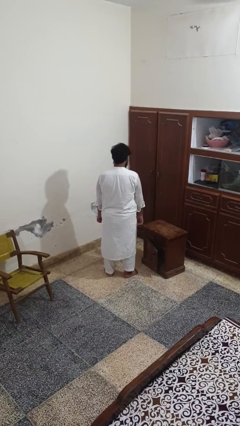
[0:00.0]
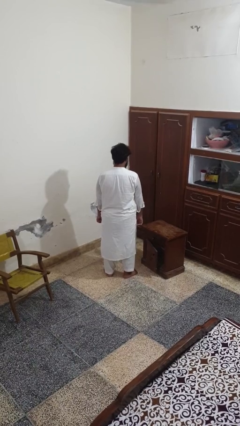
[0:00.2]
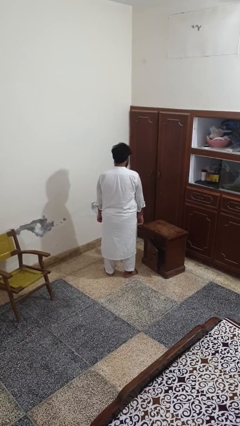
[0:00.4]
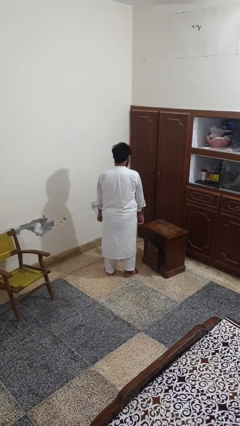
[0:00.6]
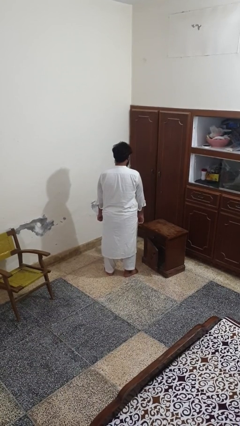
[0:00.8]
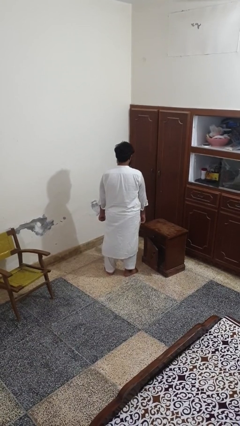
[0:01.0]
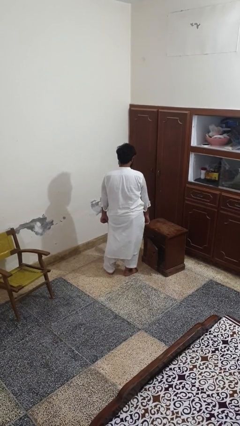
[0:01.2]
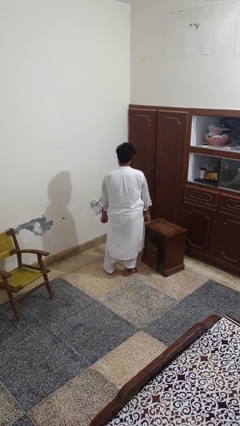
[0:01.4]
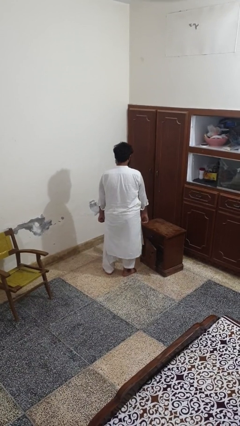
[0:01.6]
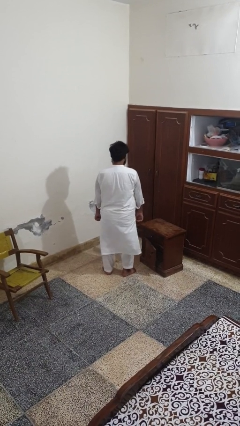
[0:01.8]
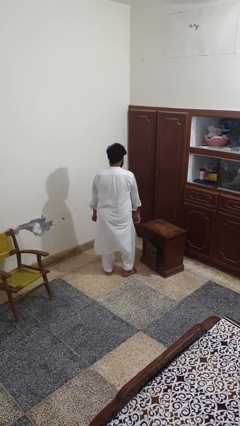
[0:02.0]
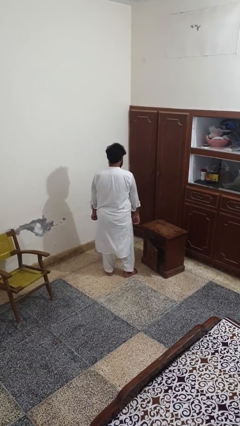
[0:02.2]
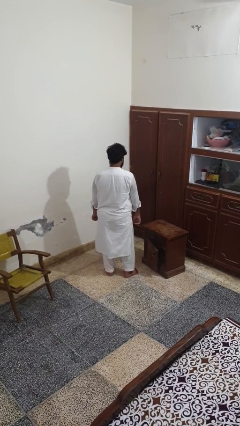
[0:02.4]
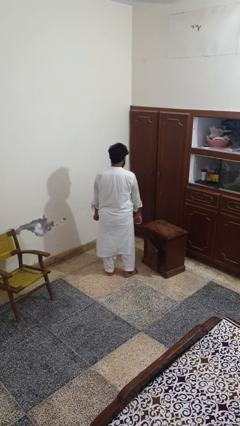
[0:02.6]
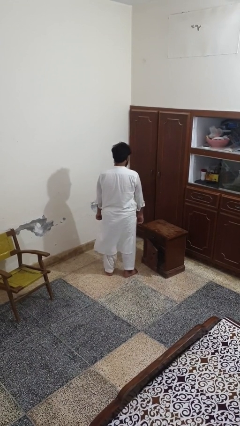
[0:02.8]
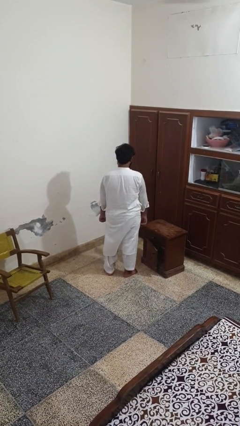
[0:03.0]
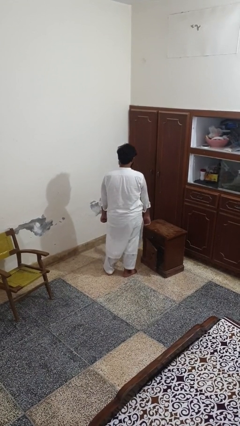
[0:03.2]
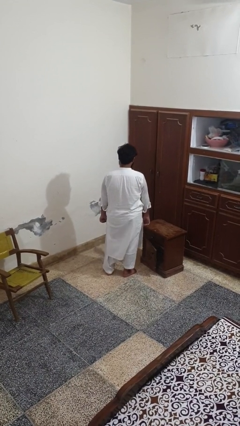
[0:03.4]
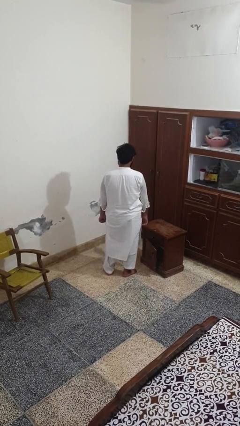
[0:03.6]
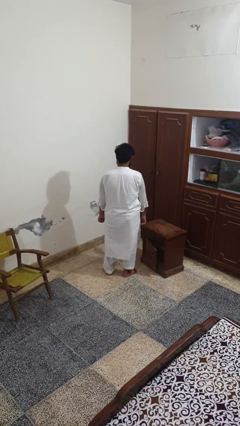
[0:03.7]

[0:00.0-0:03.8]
person wiggles hips

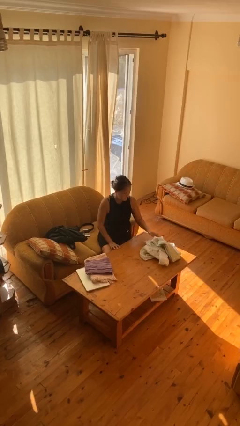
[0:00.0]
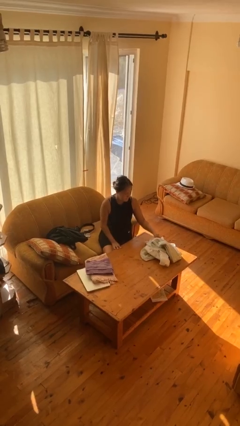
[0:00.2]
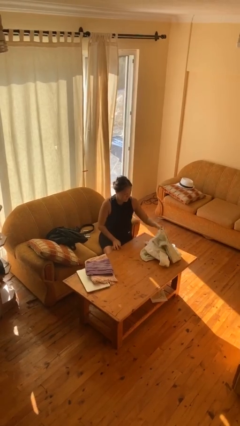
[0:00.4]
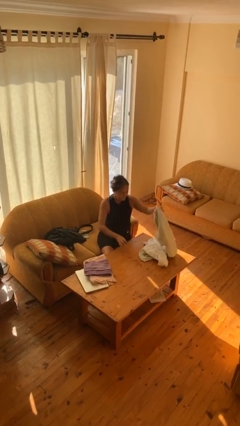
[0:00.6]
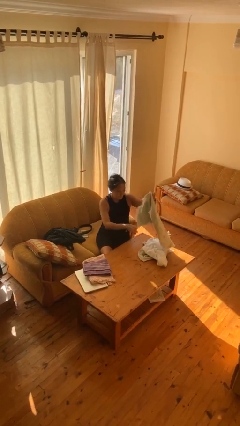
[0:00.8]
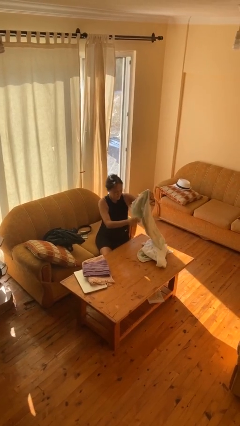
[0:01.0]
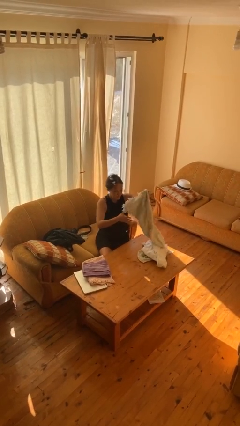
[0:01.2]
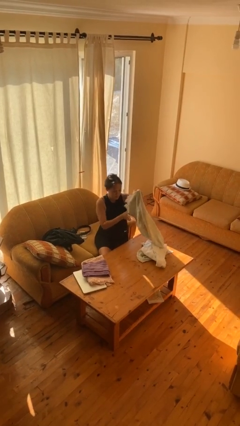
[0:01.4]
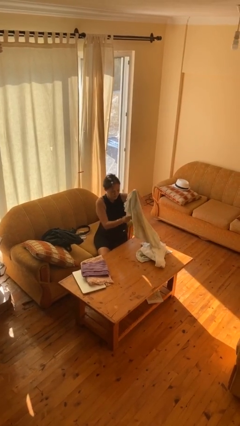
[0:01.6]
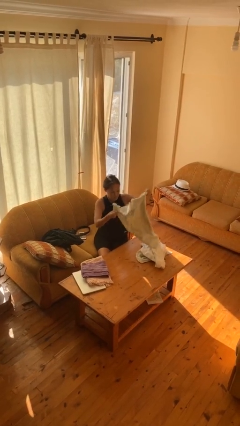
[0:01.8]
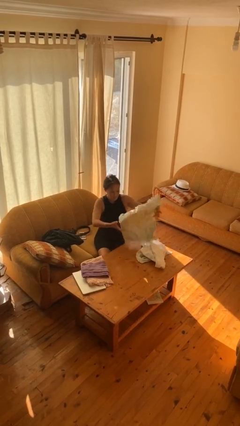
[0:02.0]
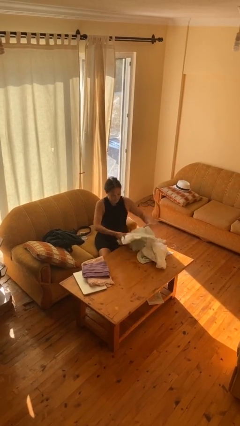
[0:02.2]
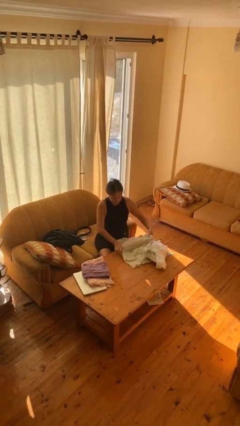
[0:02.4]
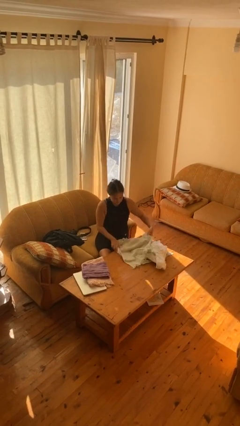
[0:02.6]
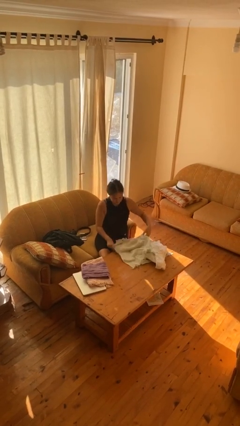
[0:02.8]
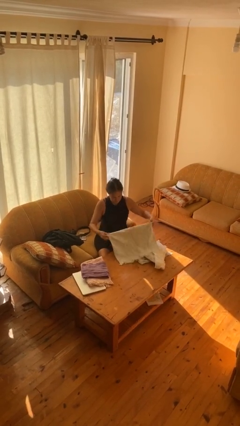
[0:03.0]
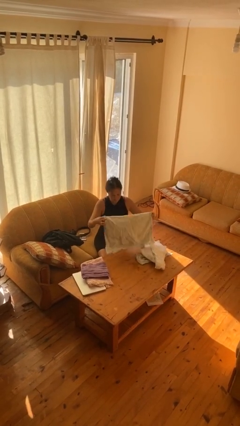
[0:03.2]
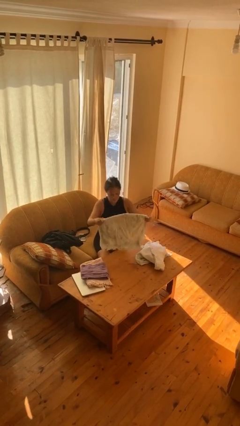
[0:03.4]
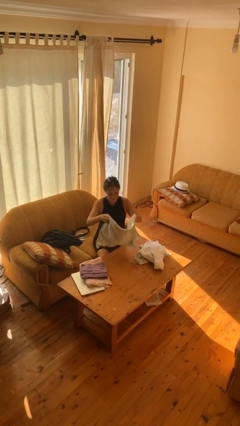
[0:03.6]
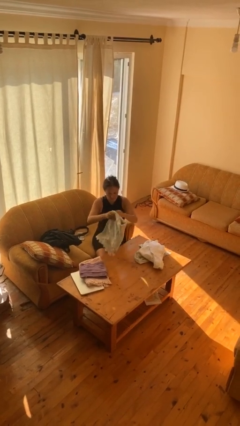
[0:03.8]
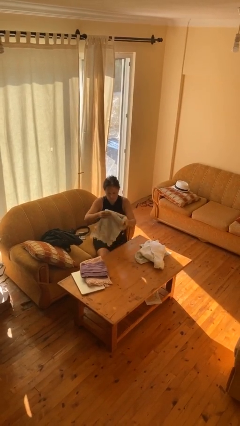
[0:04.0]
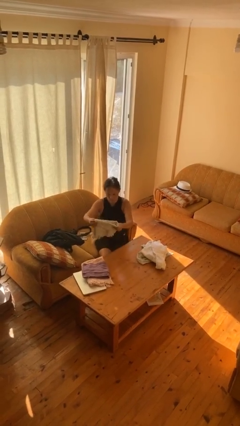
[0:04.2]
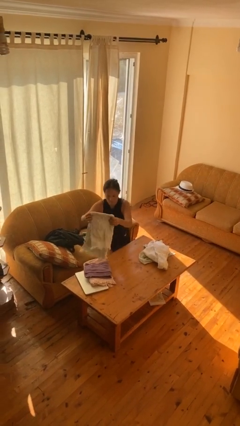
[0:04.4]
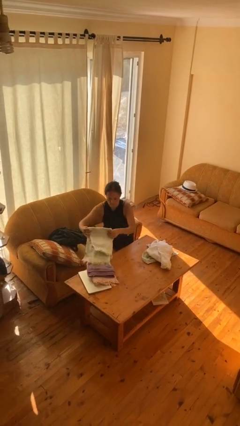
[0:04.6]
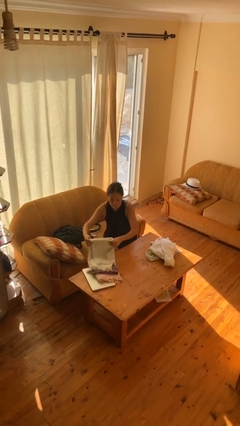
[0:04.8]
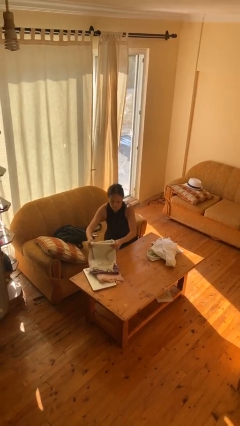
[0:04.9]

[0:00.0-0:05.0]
person folds towel

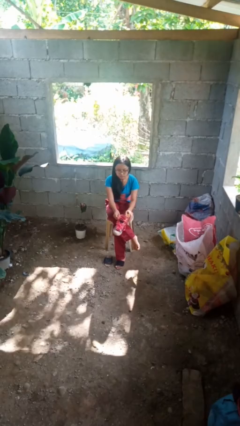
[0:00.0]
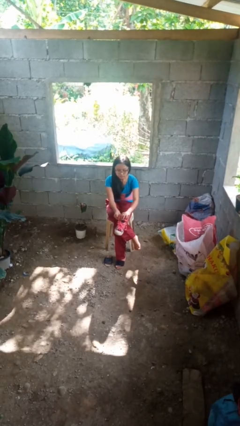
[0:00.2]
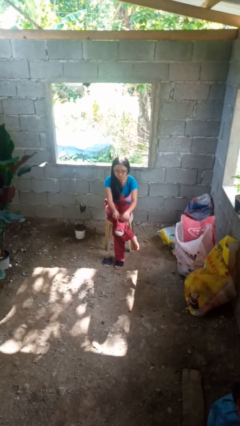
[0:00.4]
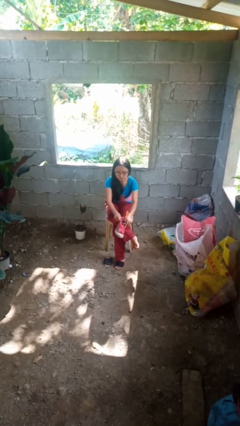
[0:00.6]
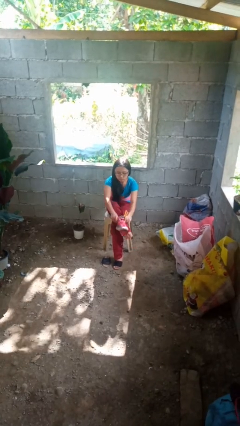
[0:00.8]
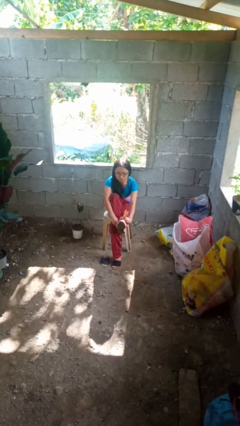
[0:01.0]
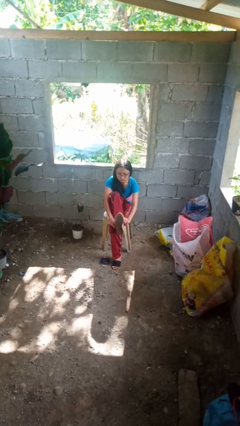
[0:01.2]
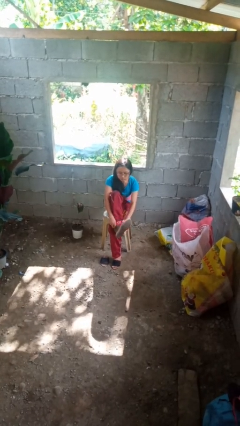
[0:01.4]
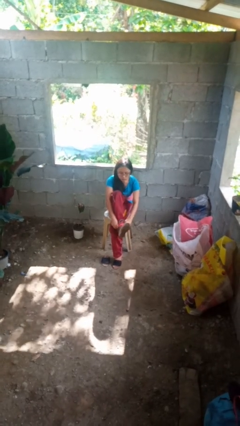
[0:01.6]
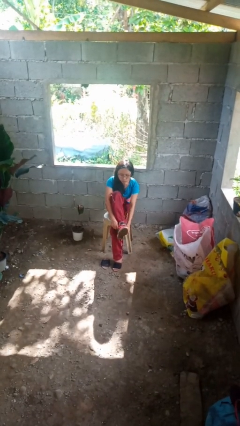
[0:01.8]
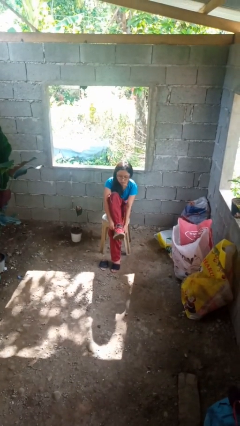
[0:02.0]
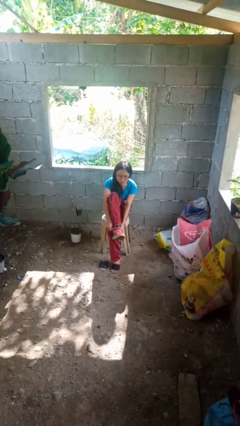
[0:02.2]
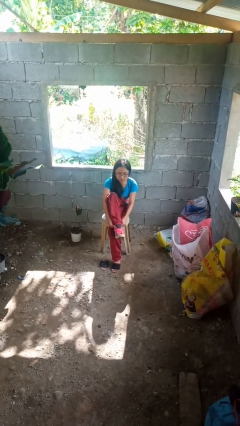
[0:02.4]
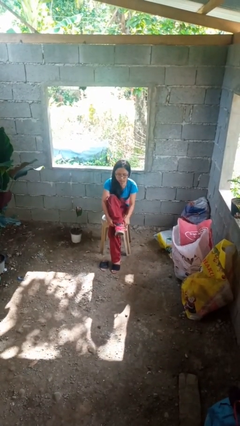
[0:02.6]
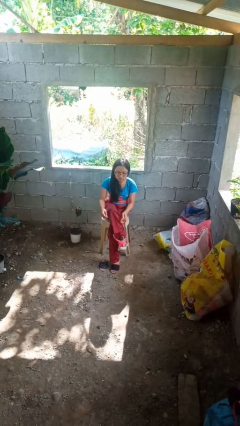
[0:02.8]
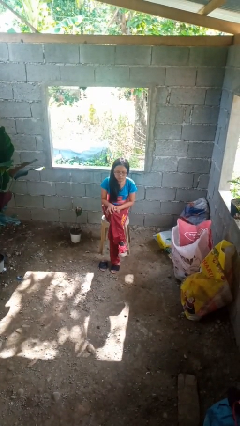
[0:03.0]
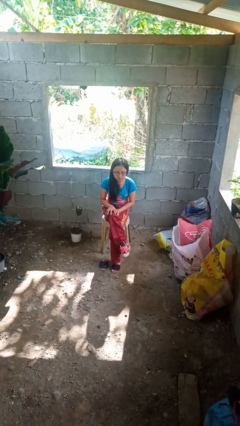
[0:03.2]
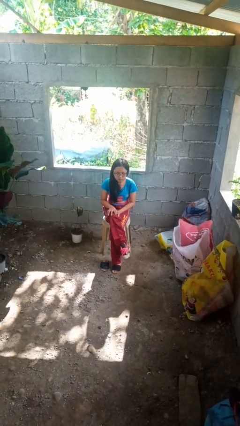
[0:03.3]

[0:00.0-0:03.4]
person puts on shoes

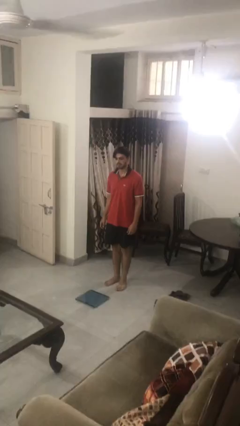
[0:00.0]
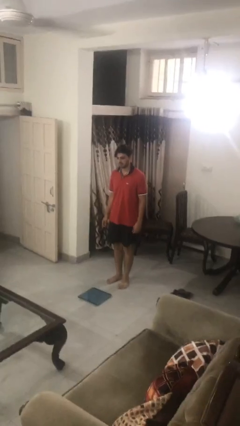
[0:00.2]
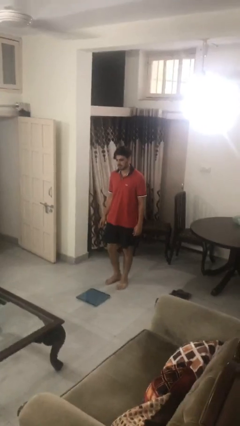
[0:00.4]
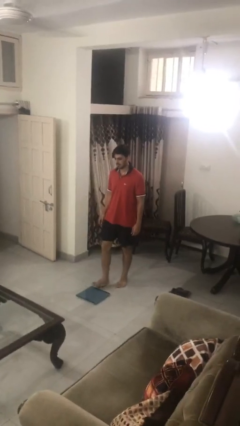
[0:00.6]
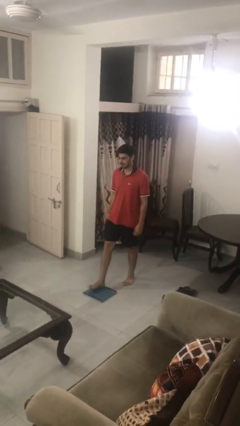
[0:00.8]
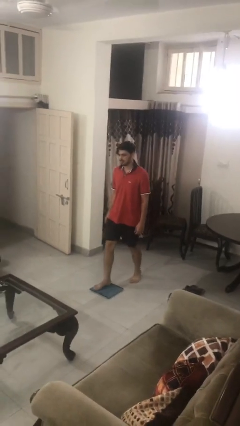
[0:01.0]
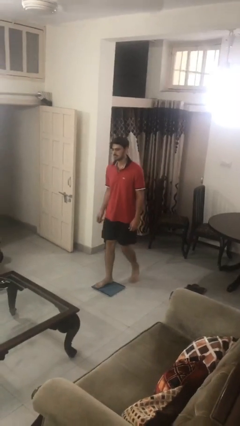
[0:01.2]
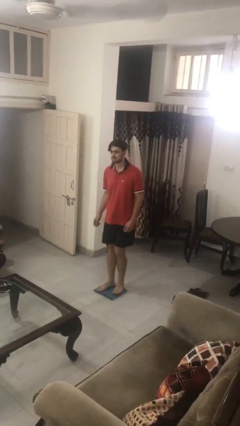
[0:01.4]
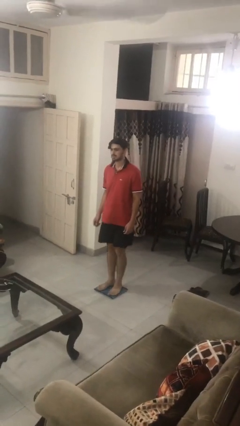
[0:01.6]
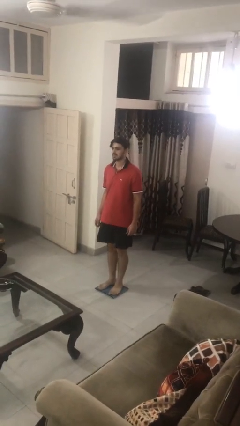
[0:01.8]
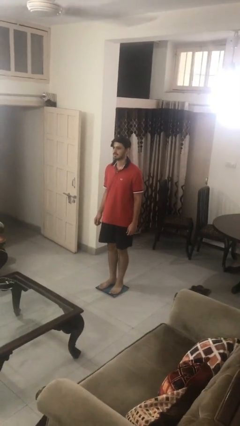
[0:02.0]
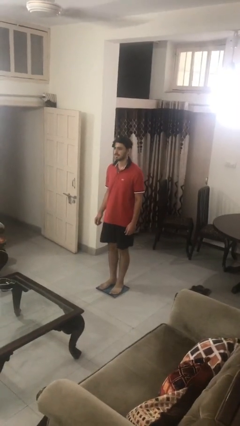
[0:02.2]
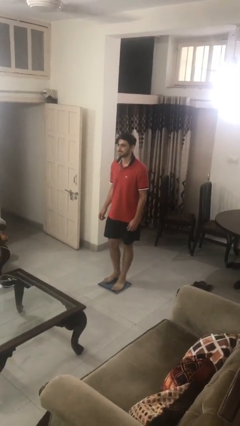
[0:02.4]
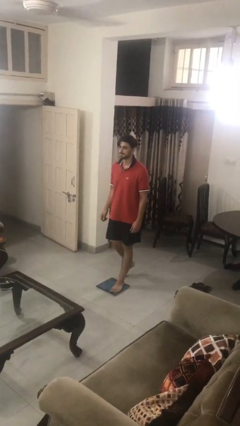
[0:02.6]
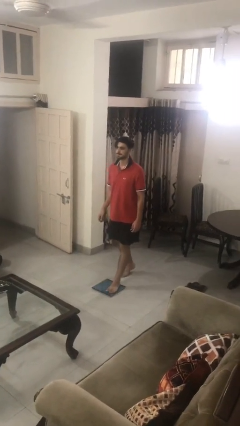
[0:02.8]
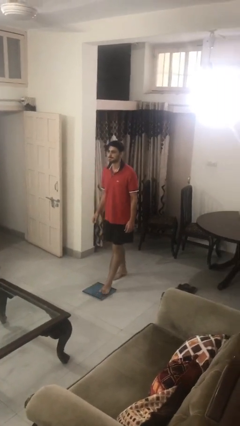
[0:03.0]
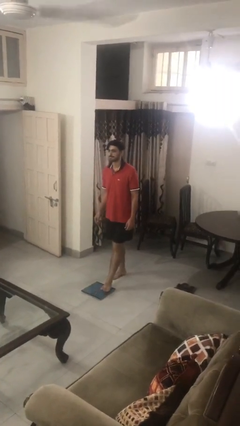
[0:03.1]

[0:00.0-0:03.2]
person uses bodyweight scale

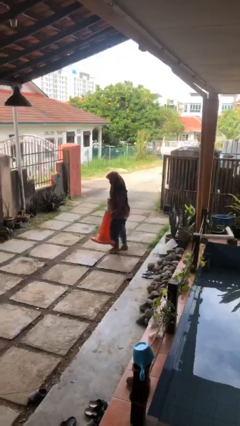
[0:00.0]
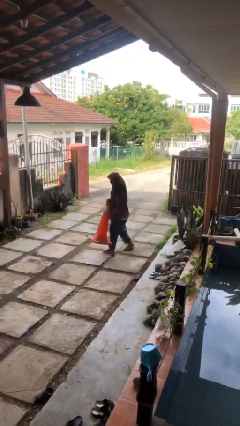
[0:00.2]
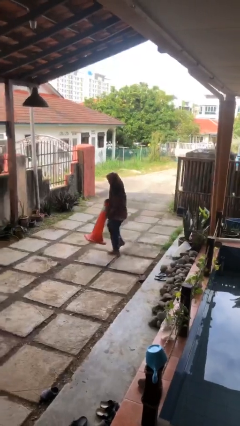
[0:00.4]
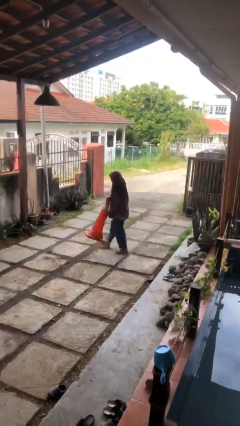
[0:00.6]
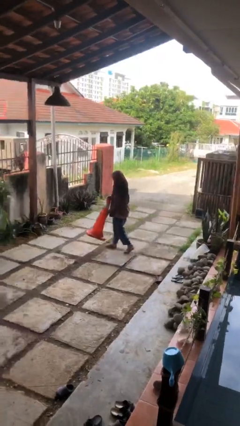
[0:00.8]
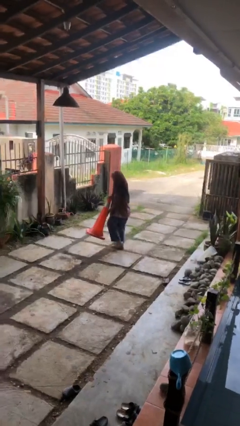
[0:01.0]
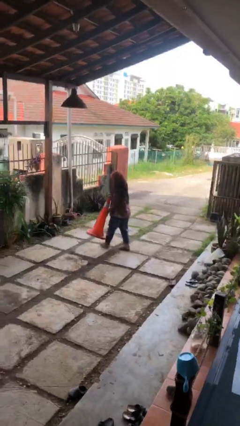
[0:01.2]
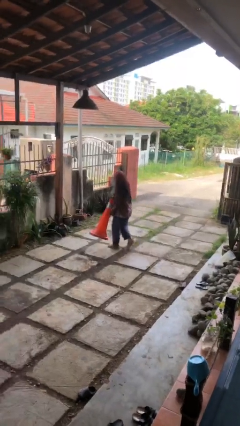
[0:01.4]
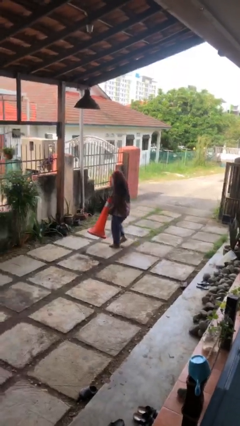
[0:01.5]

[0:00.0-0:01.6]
person carries heavy object

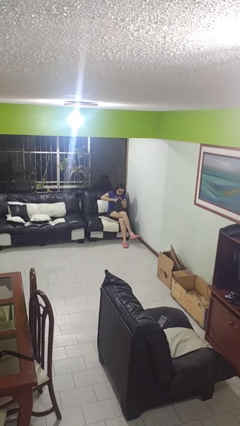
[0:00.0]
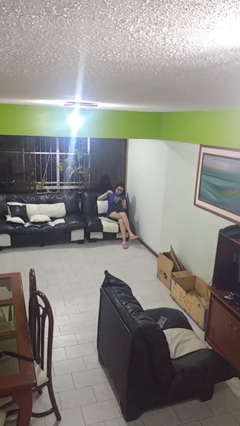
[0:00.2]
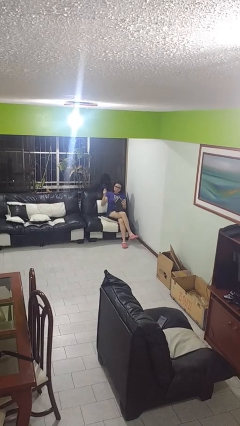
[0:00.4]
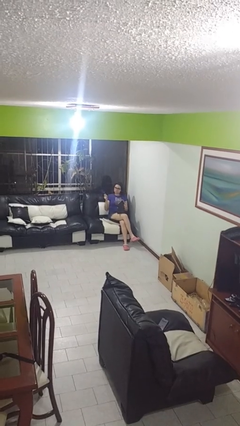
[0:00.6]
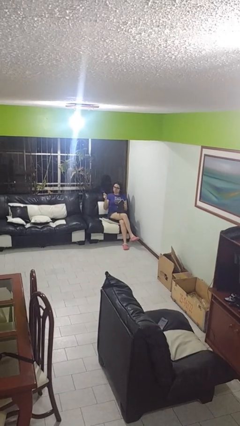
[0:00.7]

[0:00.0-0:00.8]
person takes object from purse
